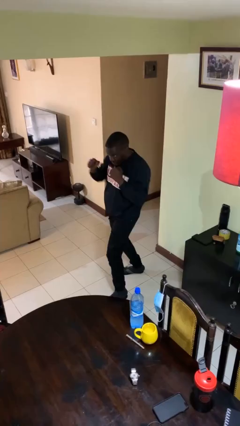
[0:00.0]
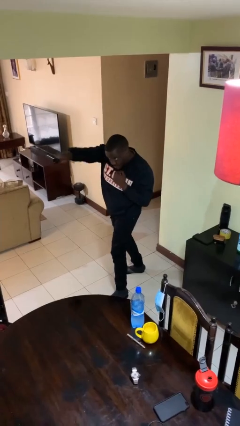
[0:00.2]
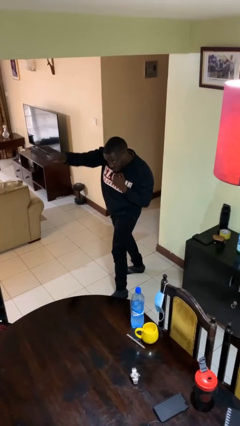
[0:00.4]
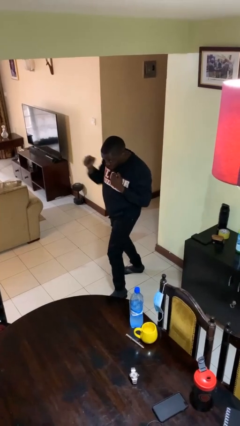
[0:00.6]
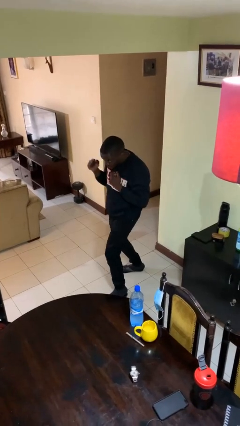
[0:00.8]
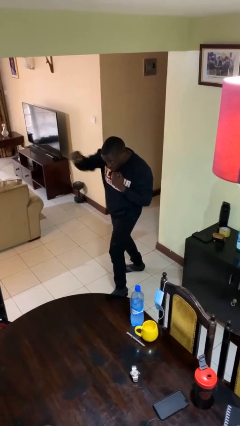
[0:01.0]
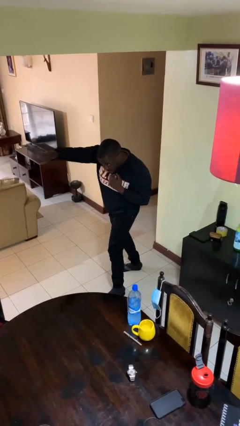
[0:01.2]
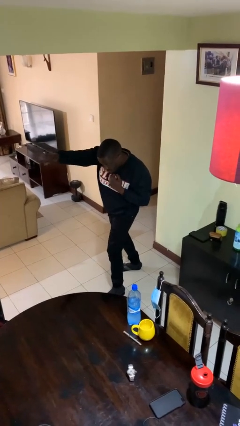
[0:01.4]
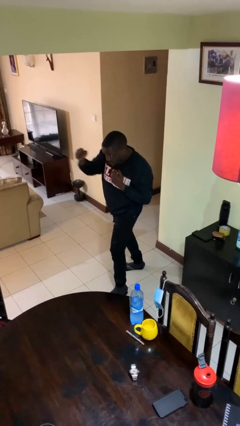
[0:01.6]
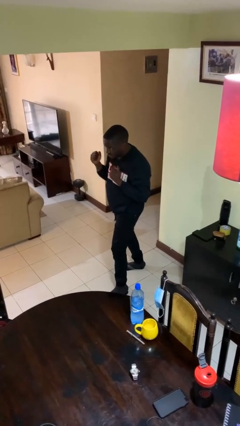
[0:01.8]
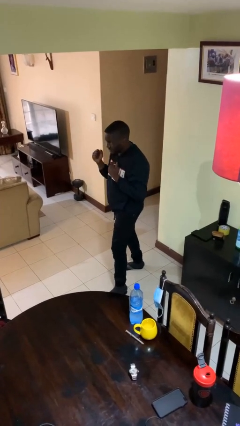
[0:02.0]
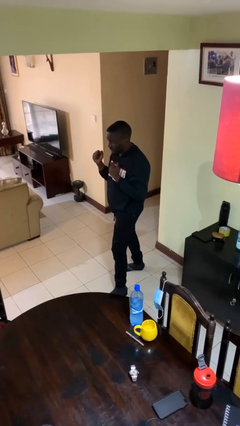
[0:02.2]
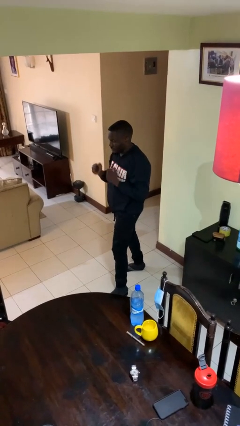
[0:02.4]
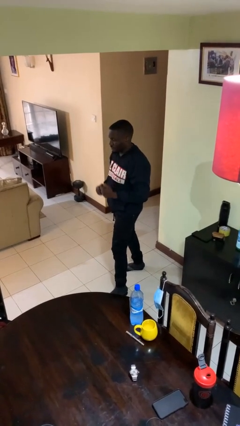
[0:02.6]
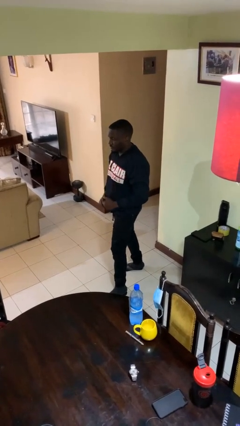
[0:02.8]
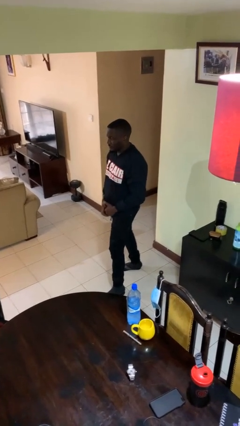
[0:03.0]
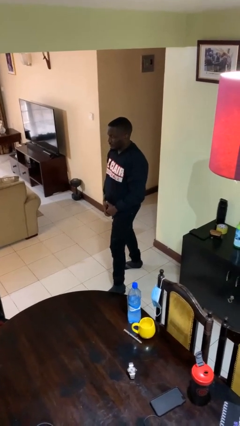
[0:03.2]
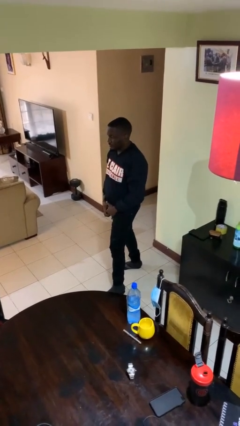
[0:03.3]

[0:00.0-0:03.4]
person punches

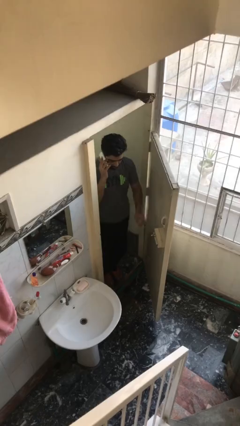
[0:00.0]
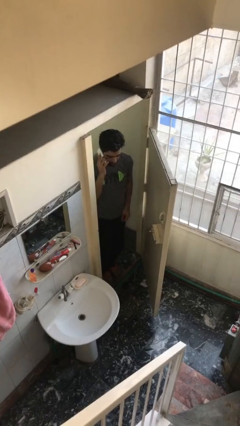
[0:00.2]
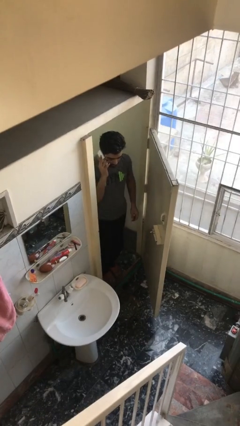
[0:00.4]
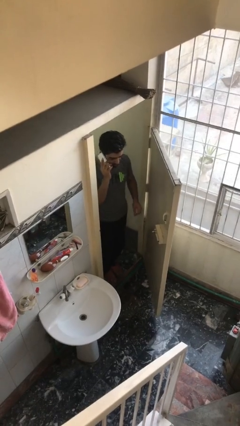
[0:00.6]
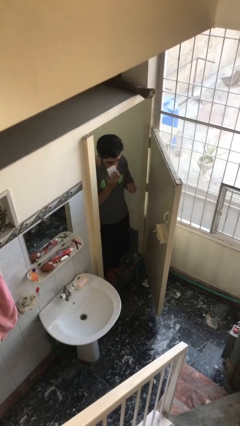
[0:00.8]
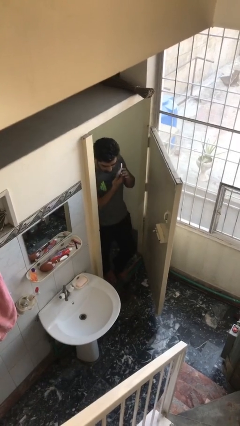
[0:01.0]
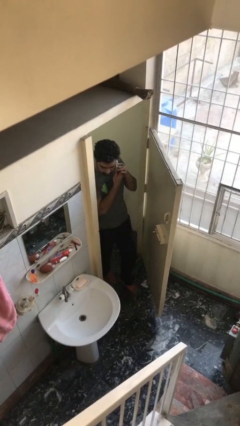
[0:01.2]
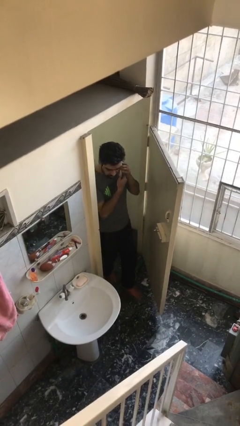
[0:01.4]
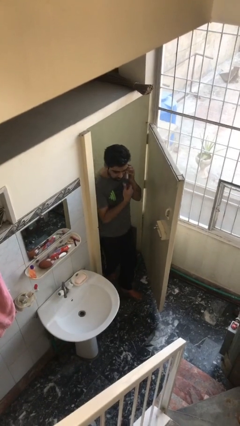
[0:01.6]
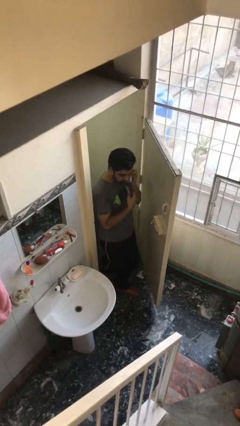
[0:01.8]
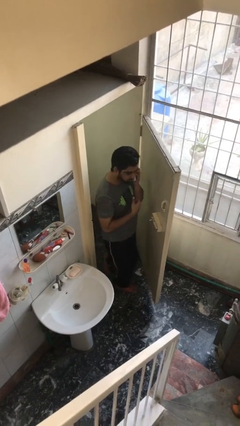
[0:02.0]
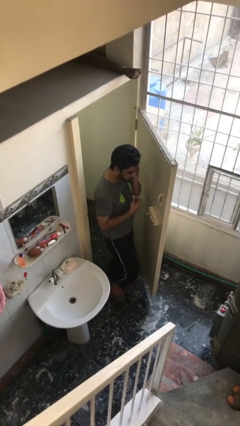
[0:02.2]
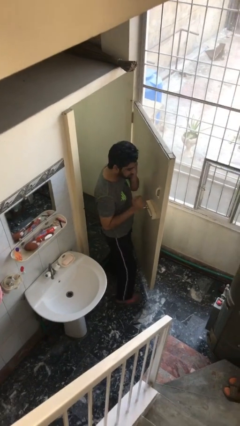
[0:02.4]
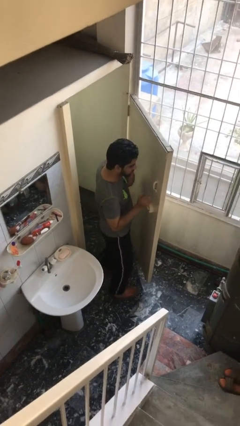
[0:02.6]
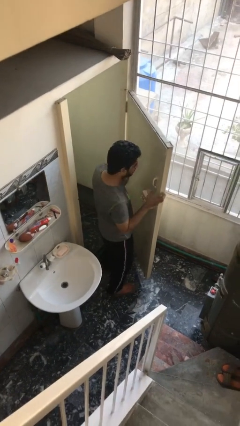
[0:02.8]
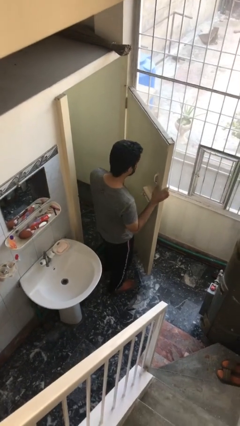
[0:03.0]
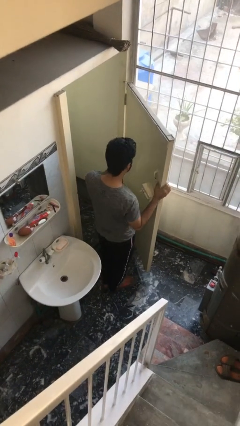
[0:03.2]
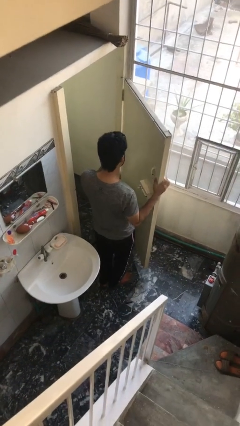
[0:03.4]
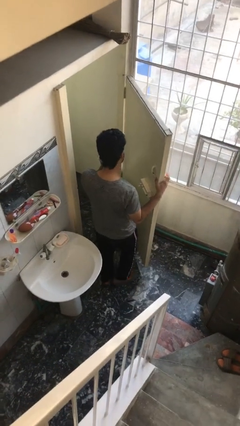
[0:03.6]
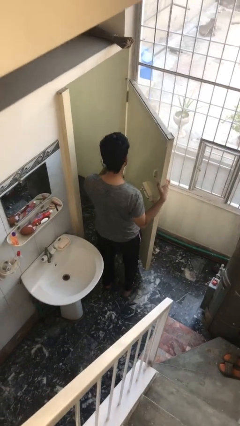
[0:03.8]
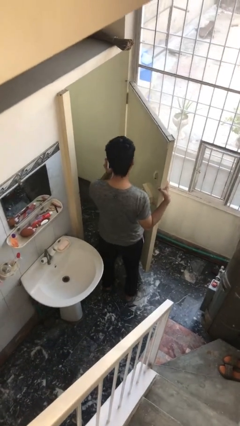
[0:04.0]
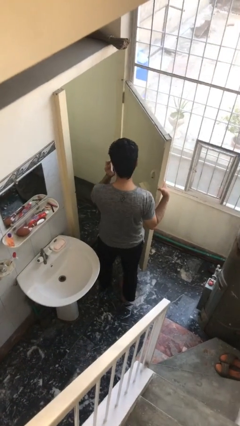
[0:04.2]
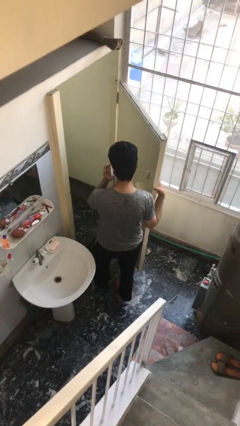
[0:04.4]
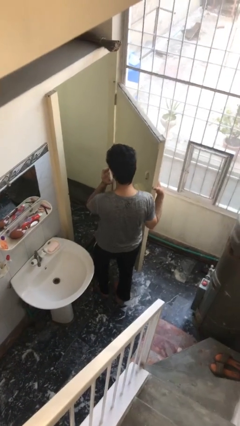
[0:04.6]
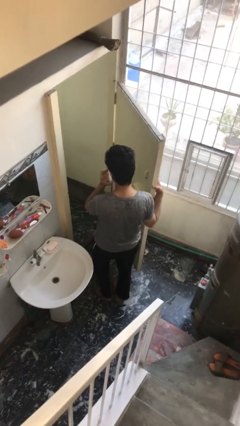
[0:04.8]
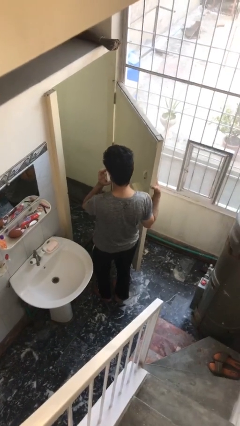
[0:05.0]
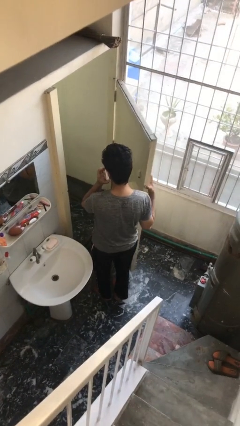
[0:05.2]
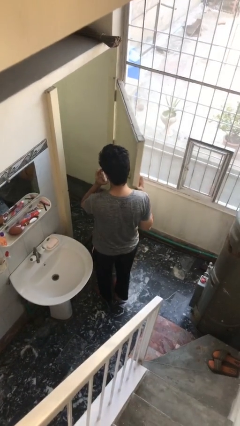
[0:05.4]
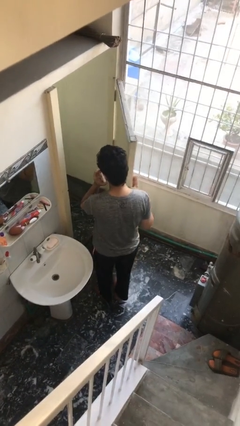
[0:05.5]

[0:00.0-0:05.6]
person enters scene through structure

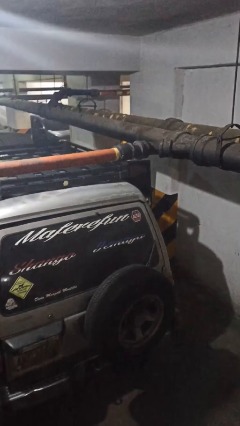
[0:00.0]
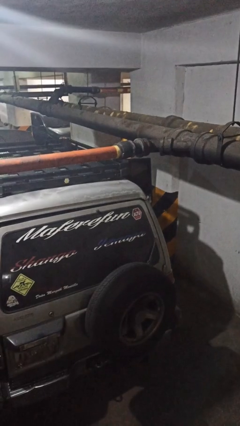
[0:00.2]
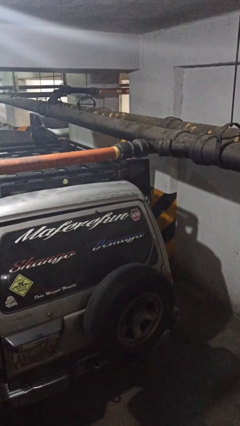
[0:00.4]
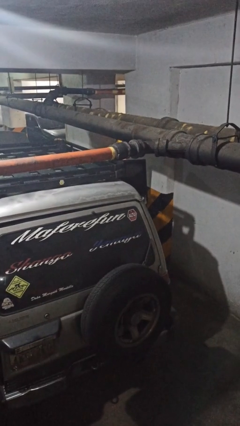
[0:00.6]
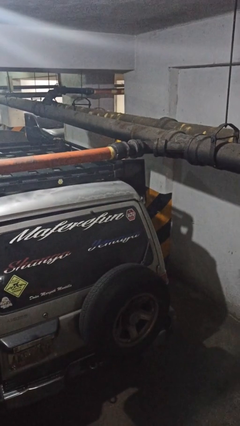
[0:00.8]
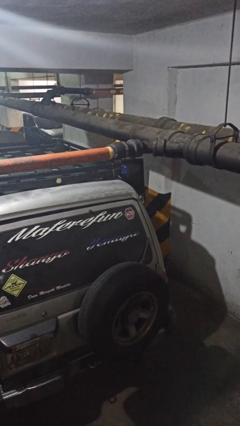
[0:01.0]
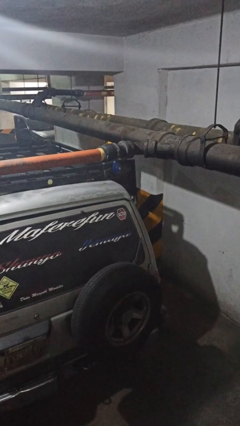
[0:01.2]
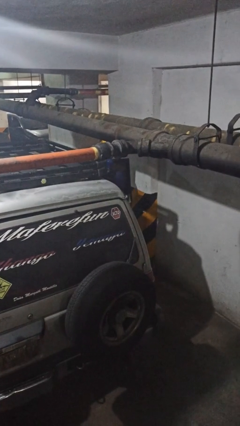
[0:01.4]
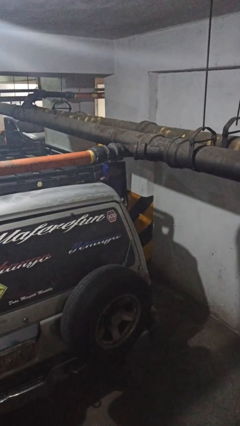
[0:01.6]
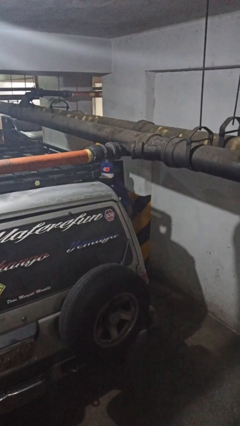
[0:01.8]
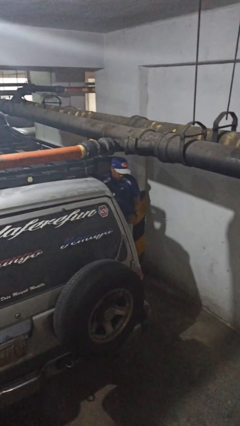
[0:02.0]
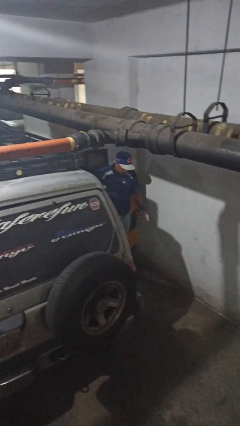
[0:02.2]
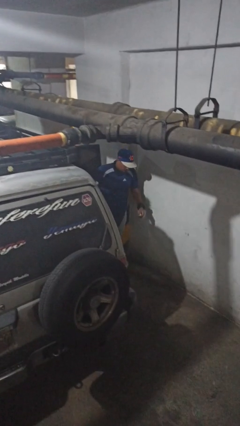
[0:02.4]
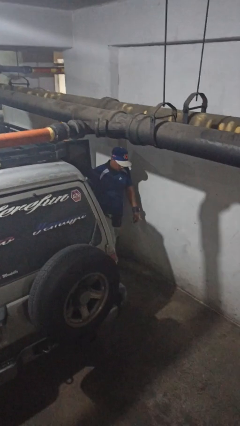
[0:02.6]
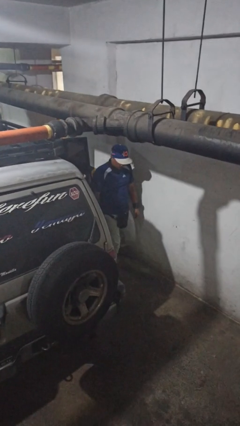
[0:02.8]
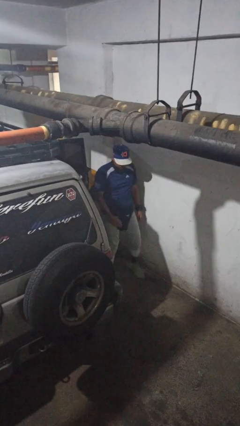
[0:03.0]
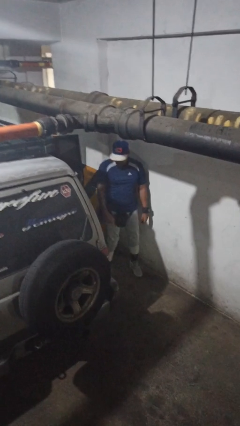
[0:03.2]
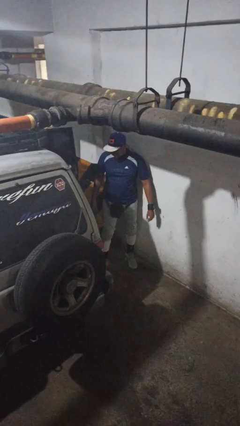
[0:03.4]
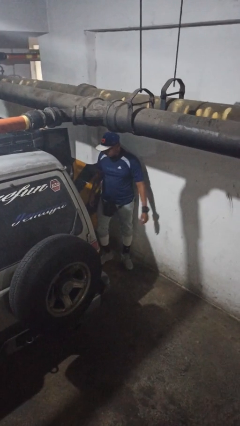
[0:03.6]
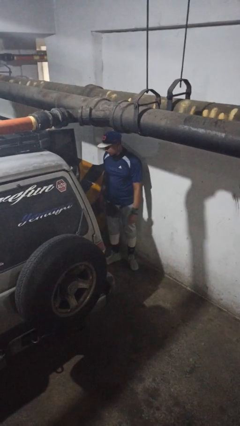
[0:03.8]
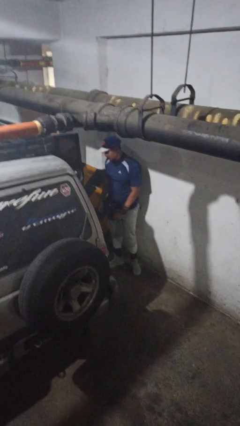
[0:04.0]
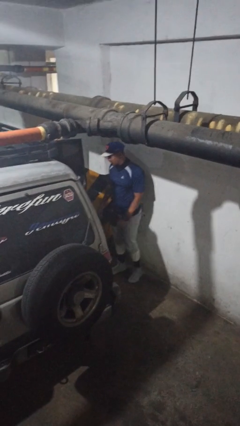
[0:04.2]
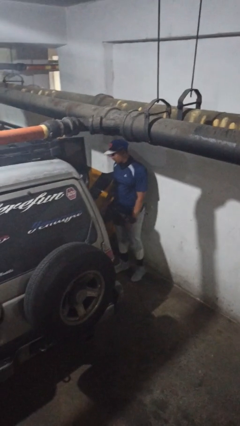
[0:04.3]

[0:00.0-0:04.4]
person exits car

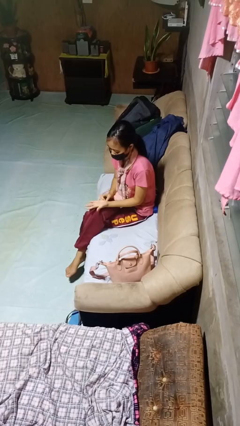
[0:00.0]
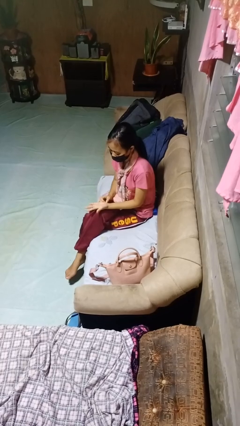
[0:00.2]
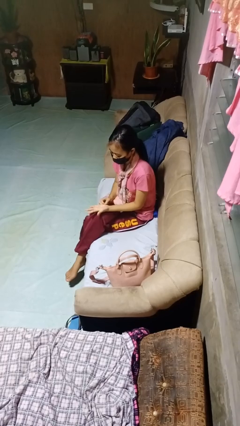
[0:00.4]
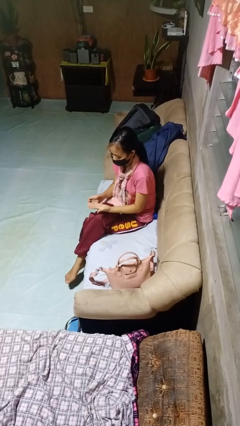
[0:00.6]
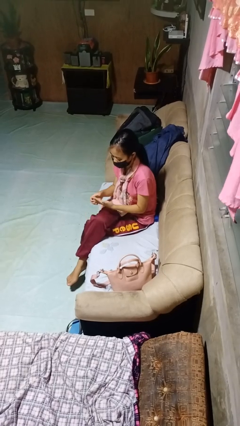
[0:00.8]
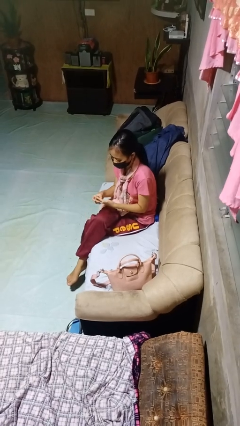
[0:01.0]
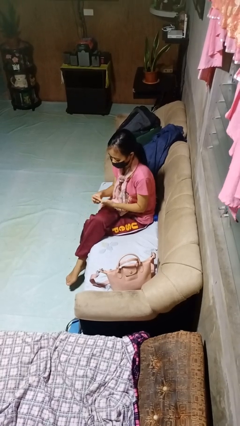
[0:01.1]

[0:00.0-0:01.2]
person takes off ring

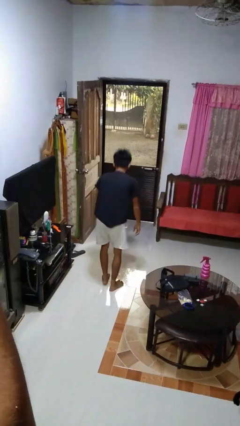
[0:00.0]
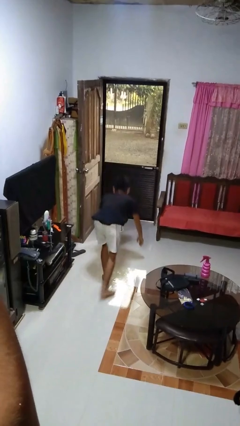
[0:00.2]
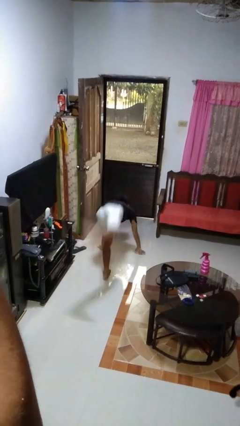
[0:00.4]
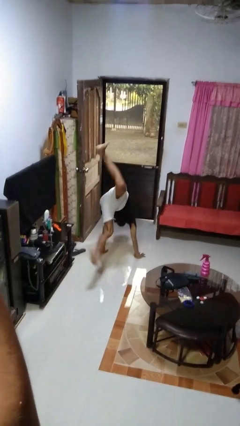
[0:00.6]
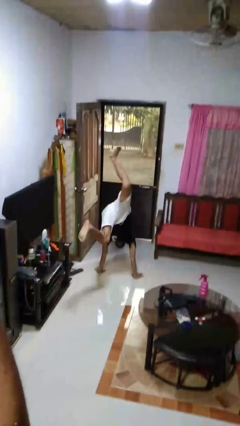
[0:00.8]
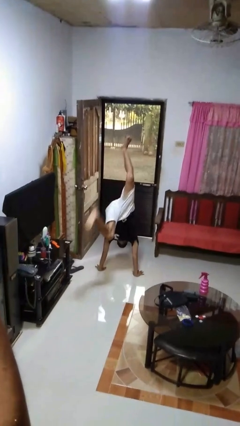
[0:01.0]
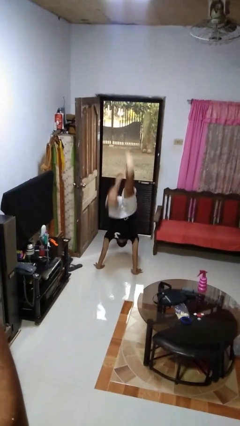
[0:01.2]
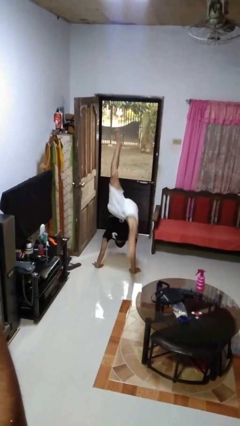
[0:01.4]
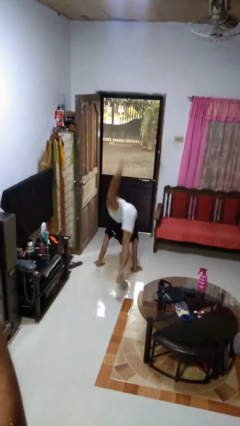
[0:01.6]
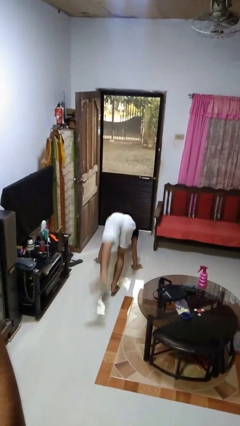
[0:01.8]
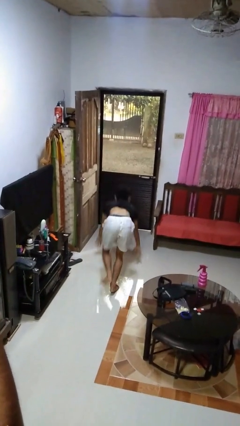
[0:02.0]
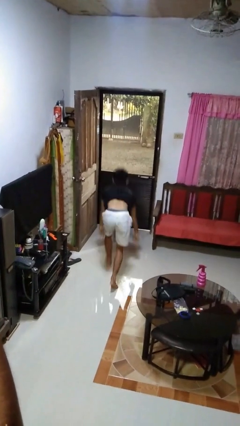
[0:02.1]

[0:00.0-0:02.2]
person handstand

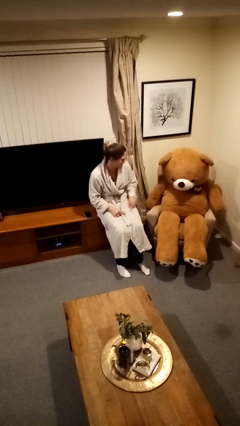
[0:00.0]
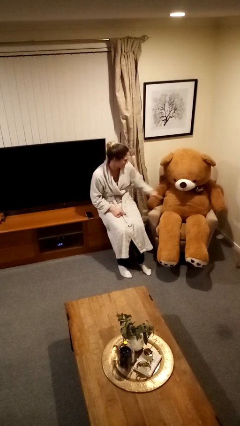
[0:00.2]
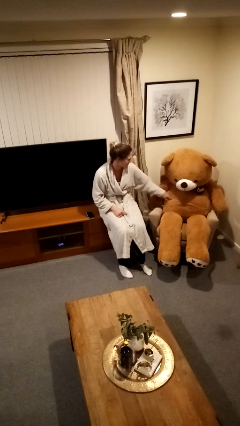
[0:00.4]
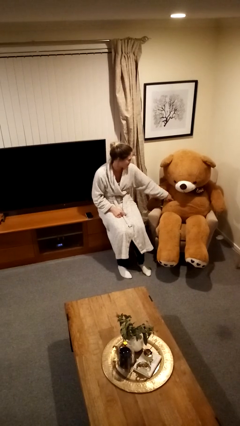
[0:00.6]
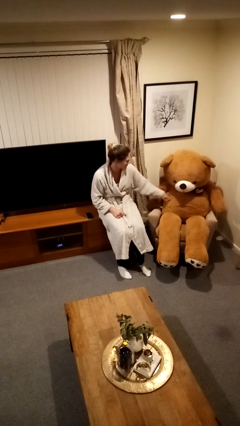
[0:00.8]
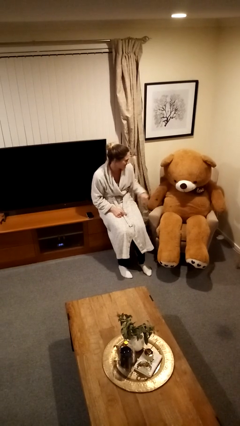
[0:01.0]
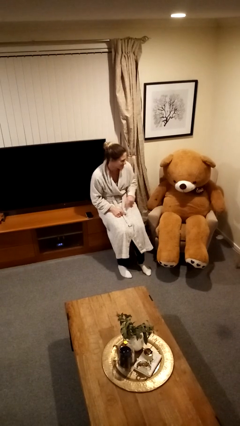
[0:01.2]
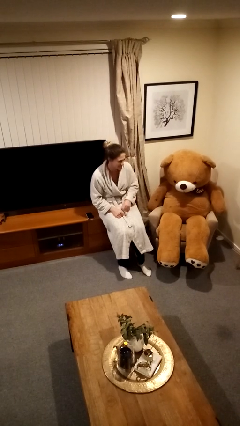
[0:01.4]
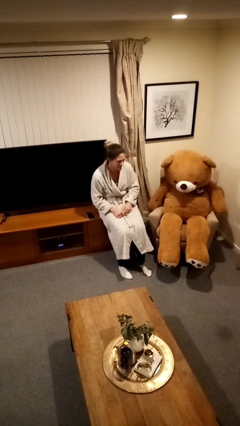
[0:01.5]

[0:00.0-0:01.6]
person taps object with finger
